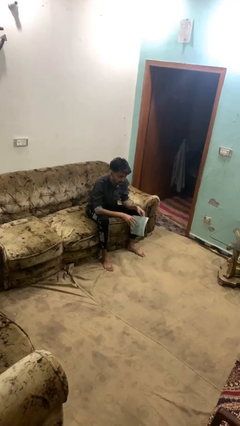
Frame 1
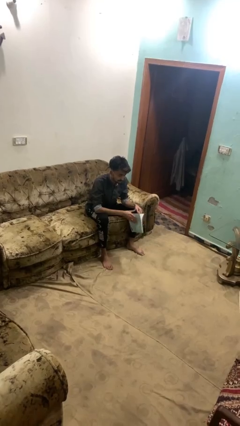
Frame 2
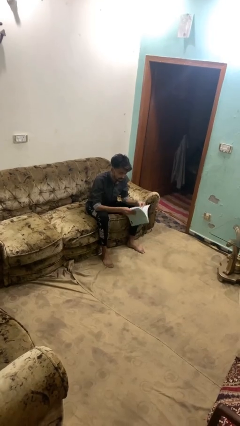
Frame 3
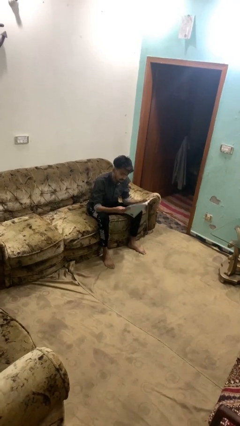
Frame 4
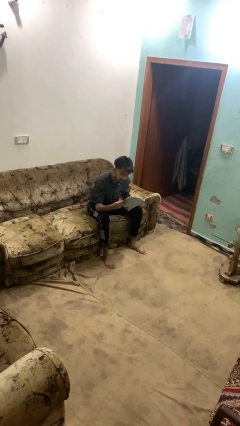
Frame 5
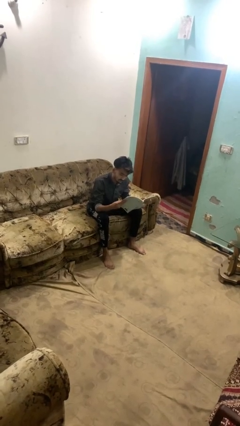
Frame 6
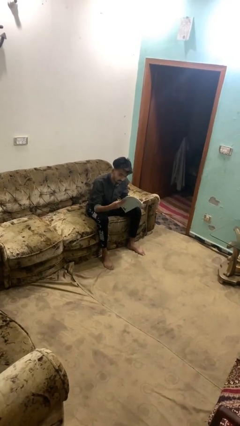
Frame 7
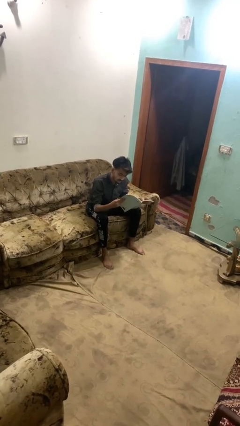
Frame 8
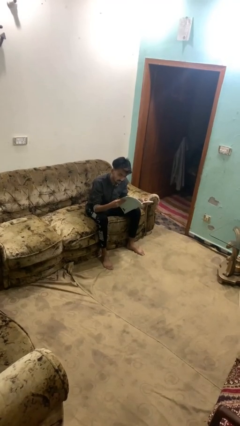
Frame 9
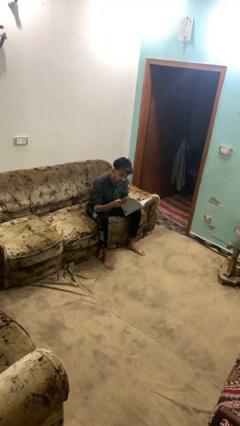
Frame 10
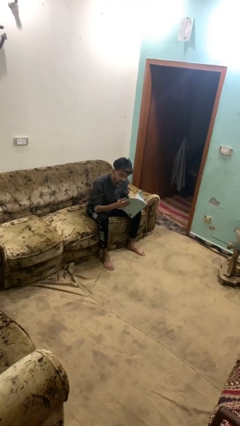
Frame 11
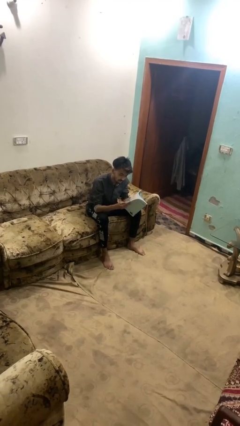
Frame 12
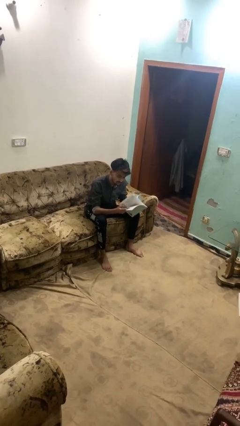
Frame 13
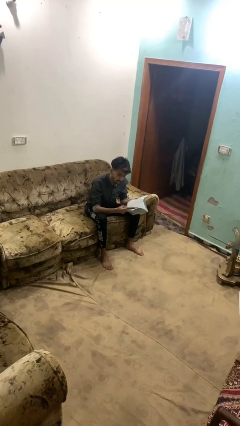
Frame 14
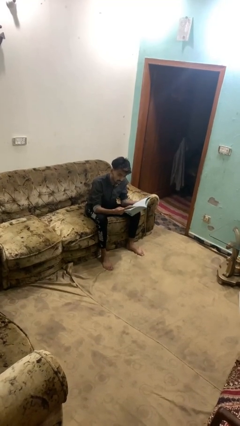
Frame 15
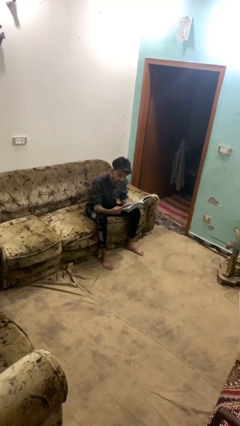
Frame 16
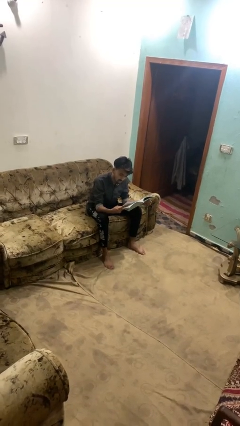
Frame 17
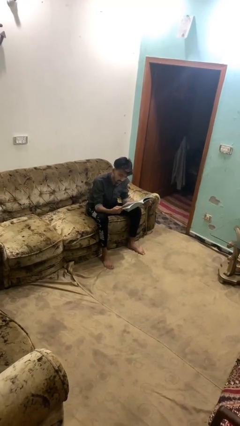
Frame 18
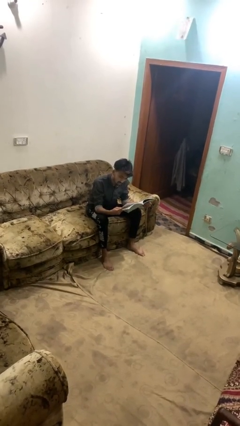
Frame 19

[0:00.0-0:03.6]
person reads magazine

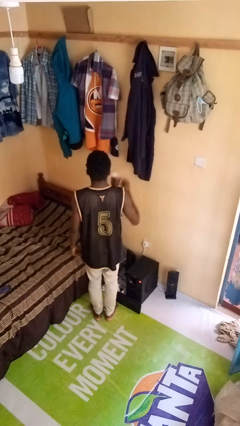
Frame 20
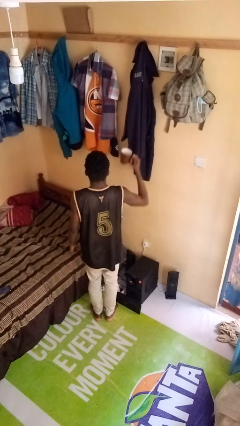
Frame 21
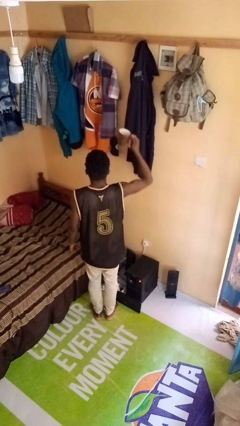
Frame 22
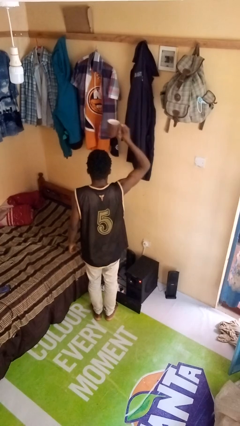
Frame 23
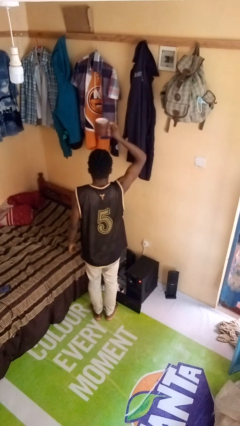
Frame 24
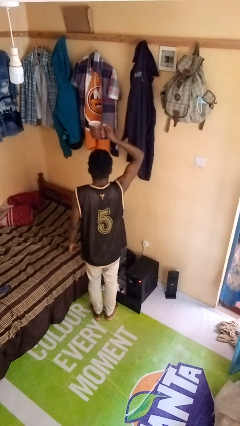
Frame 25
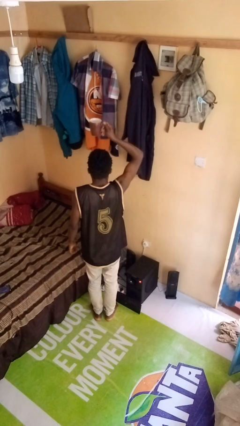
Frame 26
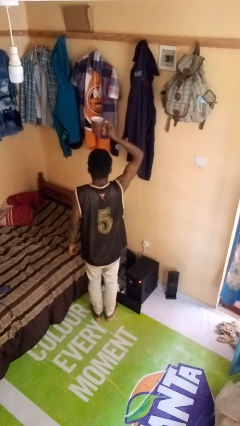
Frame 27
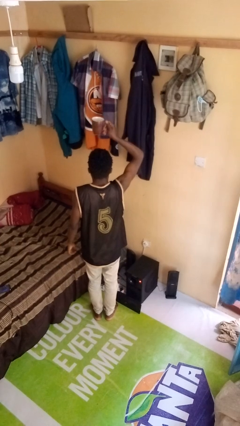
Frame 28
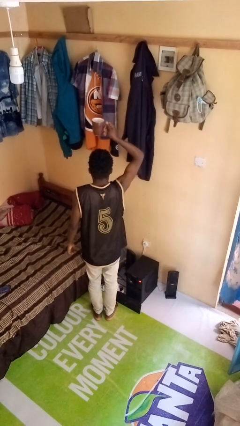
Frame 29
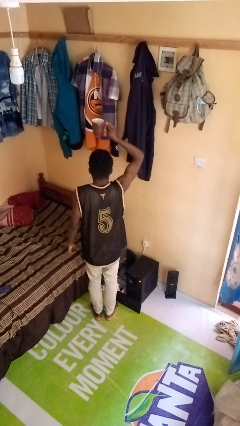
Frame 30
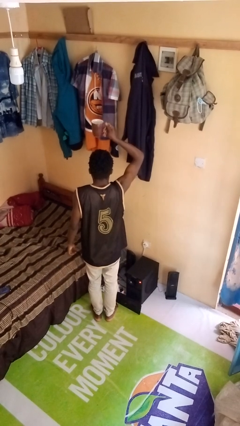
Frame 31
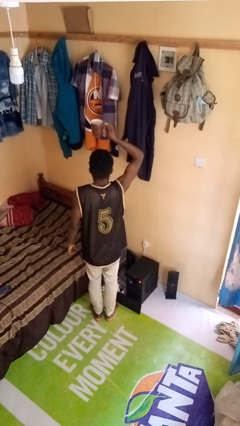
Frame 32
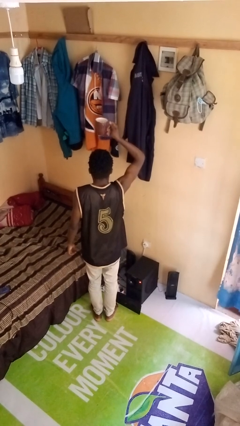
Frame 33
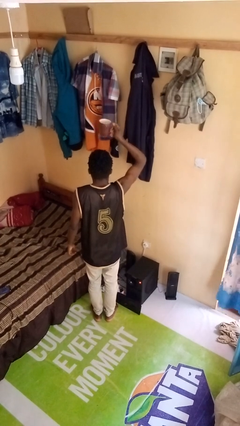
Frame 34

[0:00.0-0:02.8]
person holds object above head

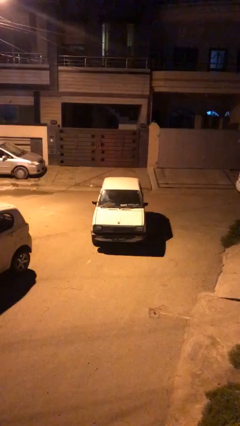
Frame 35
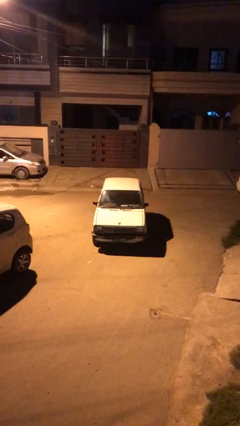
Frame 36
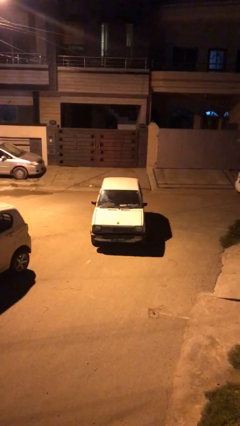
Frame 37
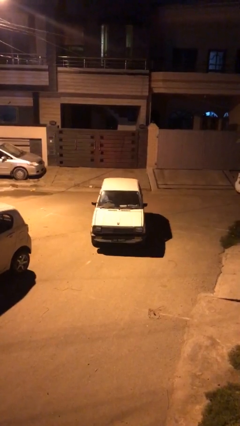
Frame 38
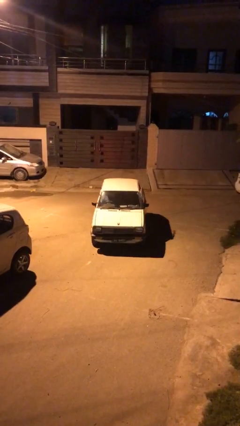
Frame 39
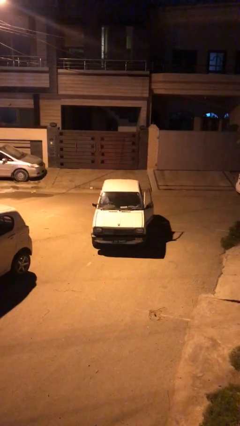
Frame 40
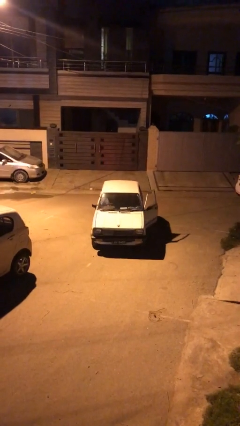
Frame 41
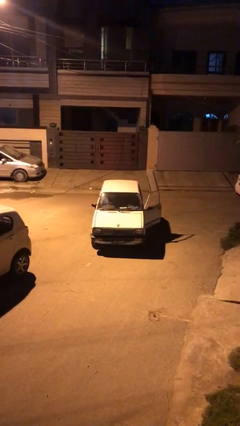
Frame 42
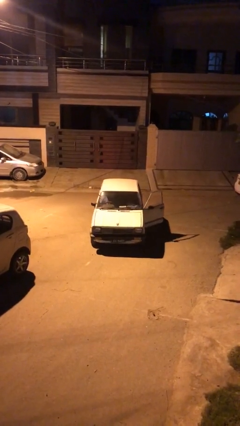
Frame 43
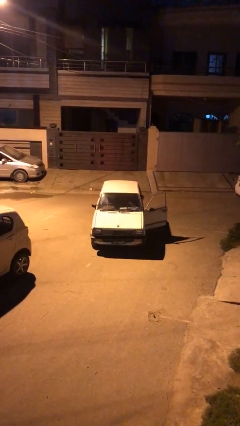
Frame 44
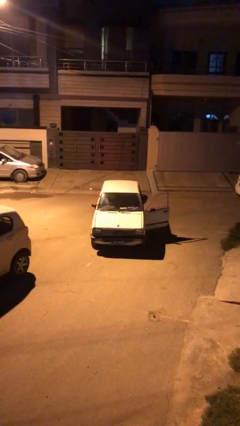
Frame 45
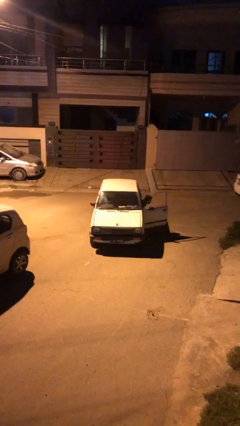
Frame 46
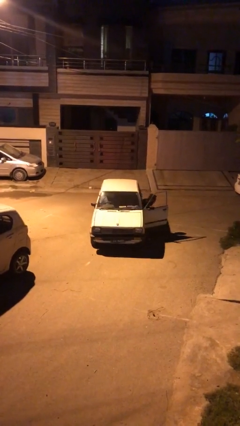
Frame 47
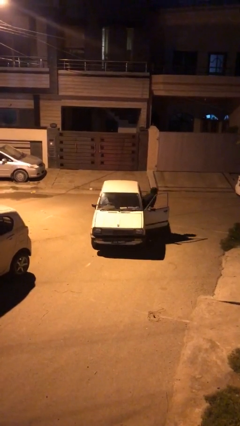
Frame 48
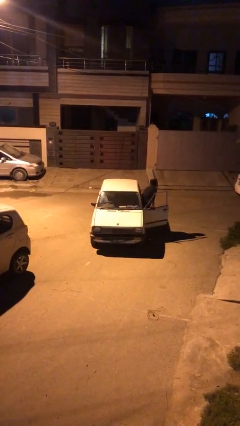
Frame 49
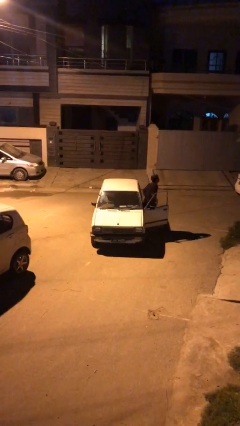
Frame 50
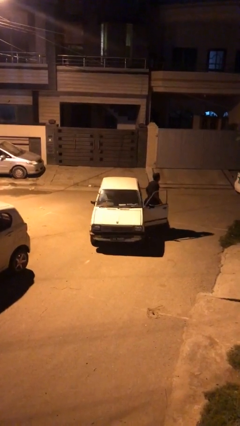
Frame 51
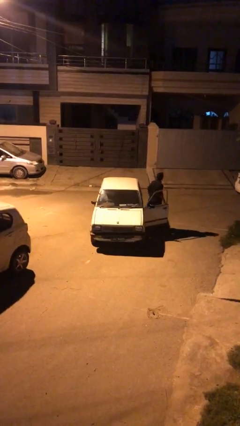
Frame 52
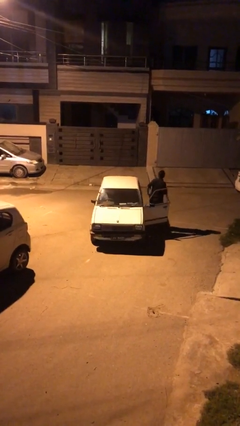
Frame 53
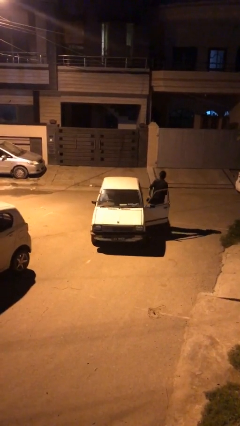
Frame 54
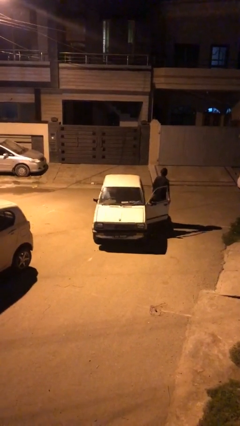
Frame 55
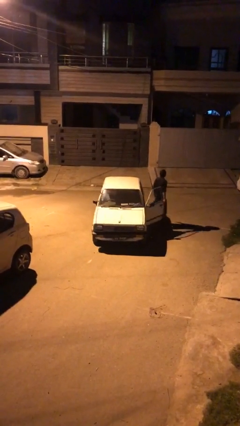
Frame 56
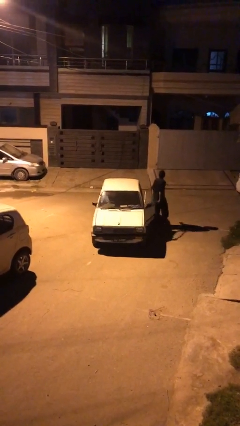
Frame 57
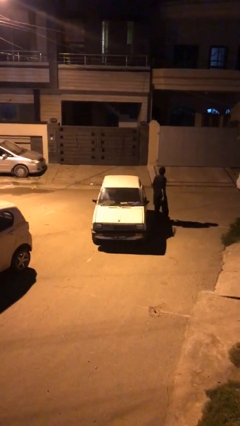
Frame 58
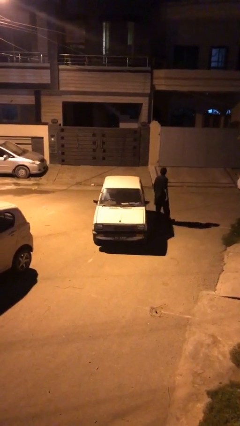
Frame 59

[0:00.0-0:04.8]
car drops off person

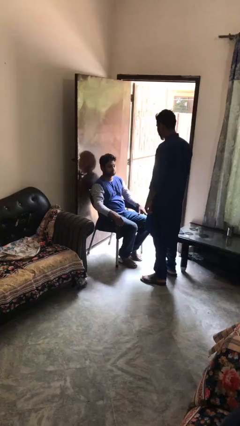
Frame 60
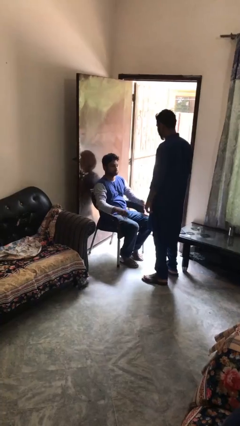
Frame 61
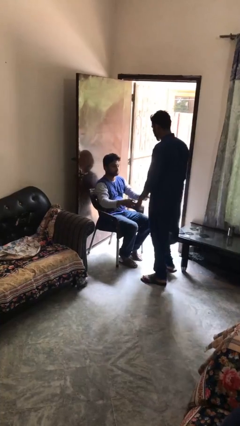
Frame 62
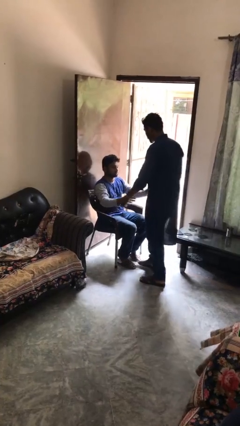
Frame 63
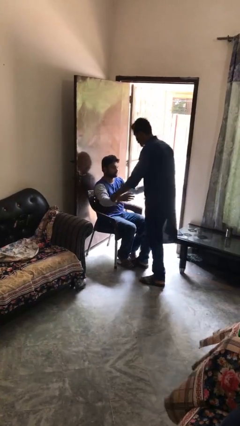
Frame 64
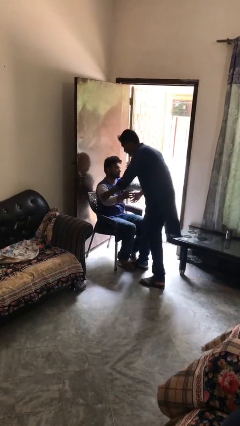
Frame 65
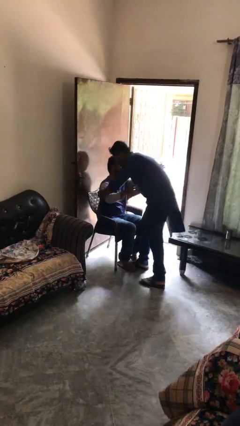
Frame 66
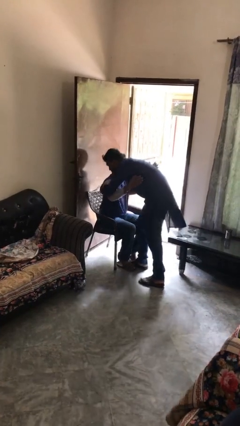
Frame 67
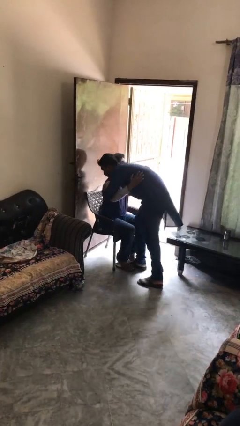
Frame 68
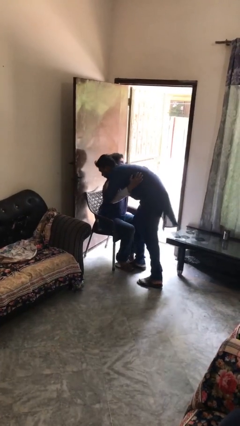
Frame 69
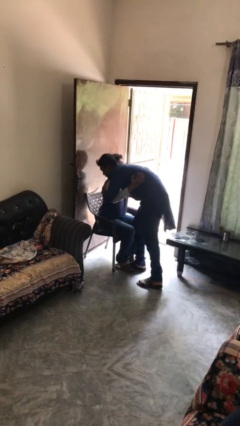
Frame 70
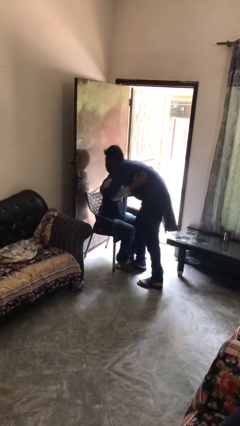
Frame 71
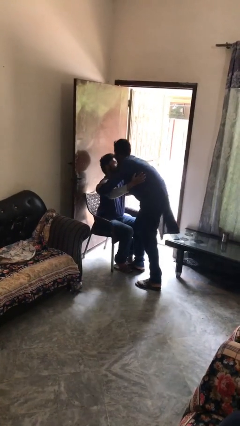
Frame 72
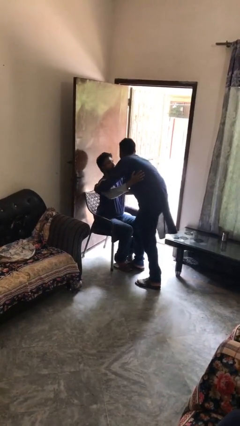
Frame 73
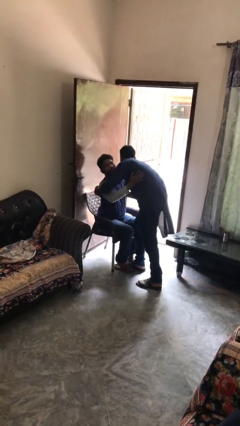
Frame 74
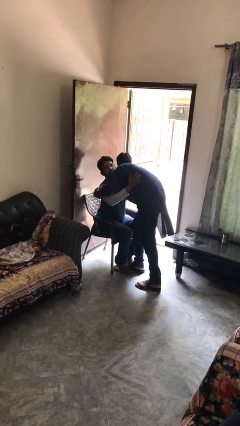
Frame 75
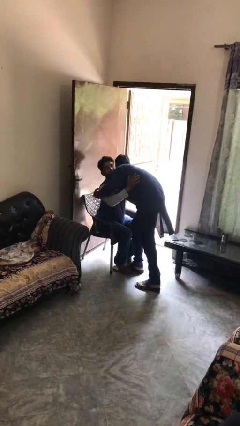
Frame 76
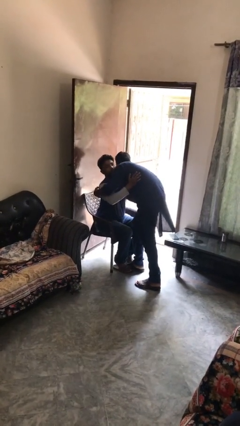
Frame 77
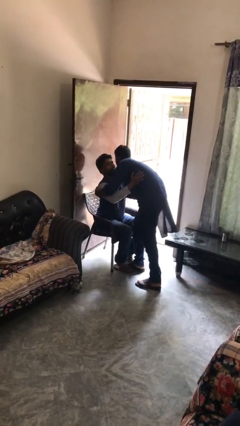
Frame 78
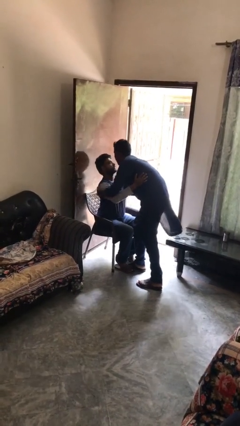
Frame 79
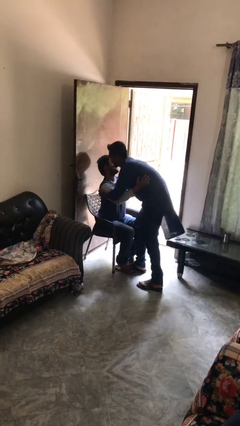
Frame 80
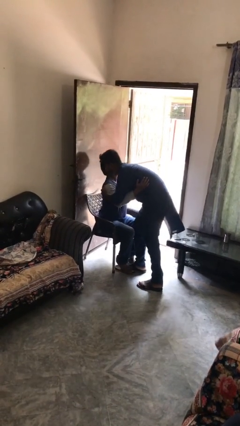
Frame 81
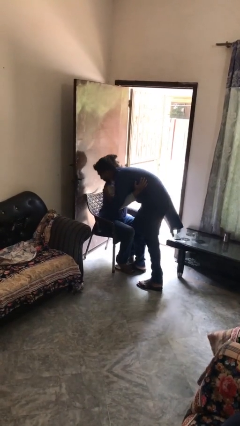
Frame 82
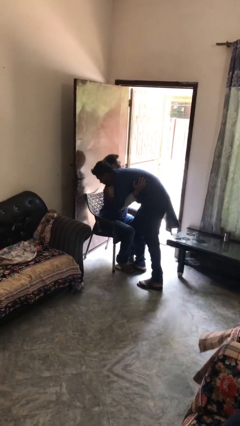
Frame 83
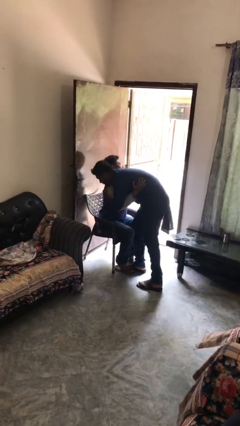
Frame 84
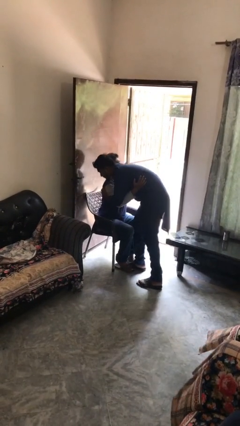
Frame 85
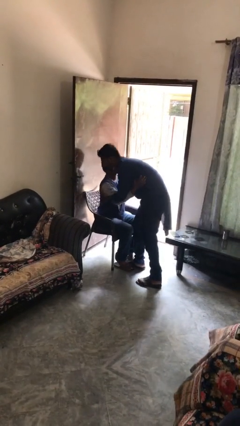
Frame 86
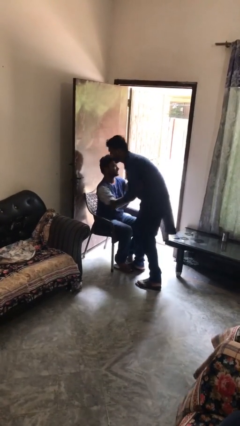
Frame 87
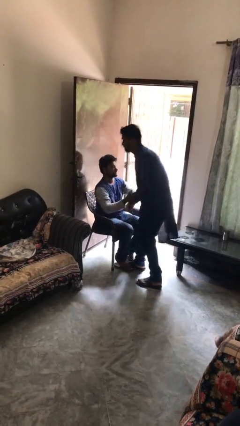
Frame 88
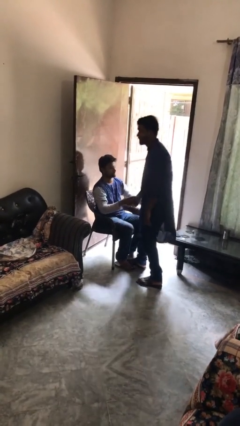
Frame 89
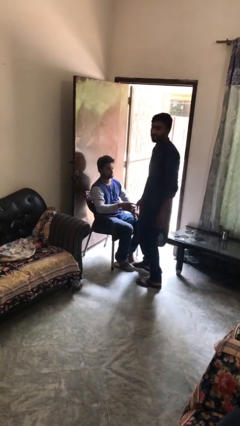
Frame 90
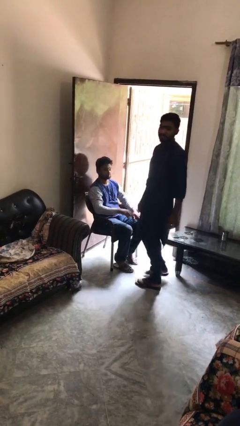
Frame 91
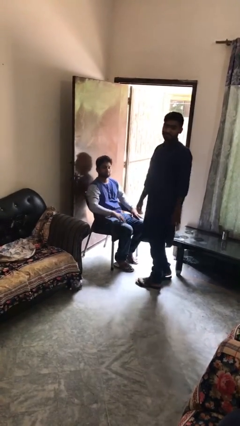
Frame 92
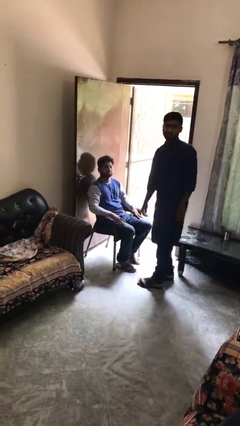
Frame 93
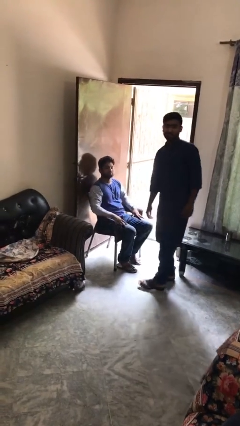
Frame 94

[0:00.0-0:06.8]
person embraces person
